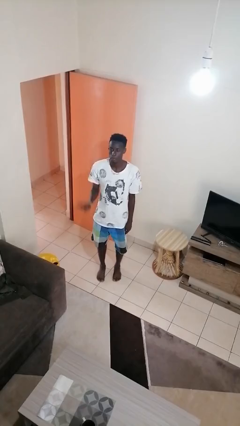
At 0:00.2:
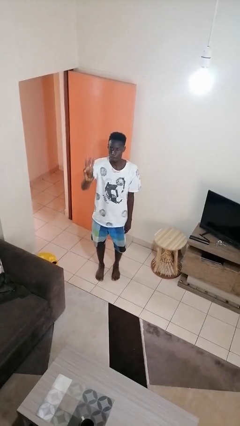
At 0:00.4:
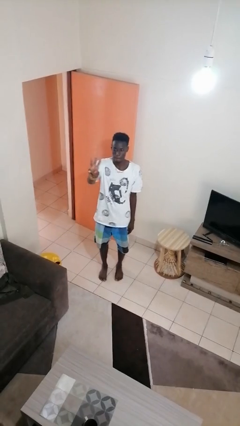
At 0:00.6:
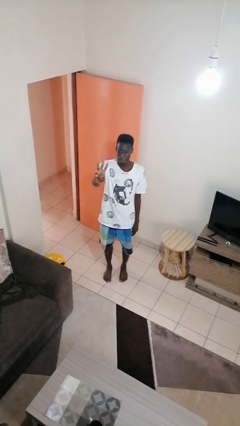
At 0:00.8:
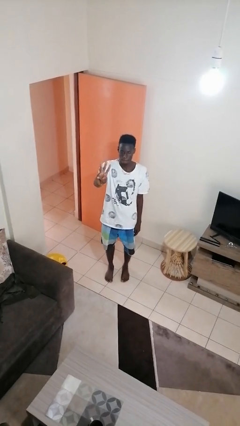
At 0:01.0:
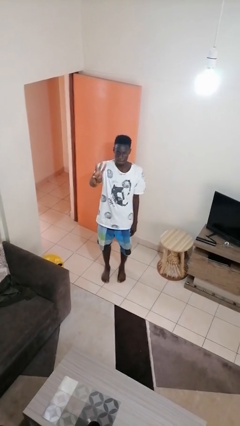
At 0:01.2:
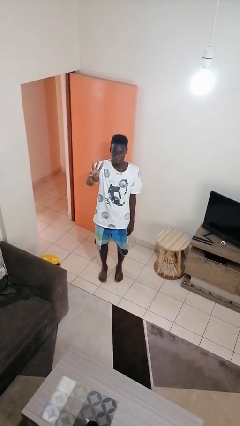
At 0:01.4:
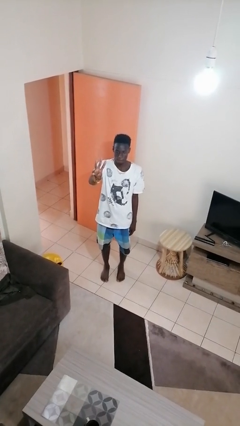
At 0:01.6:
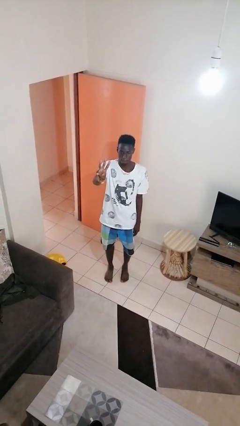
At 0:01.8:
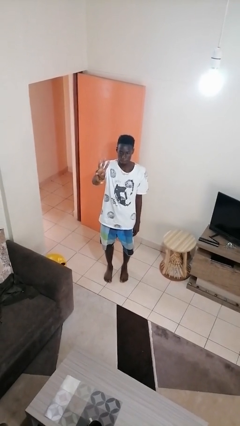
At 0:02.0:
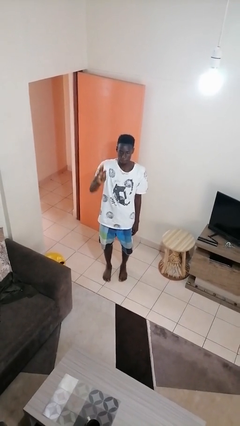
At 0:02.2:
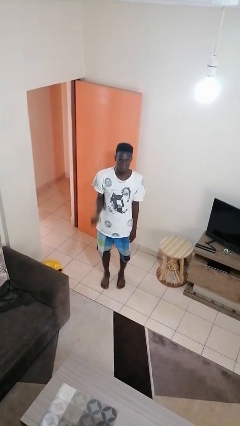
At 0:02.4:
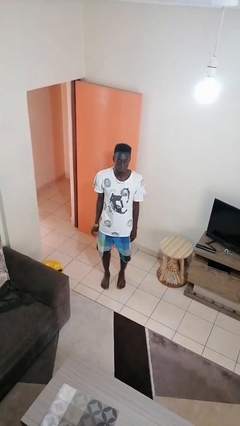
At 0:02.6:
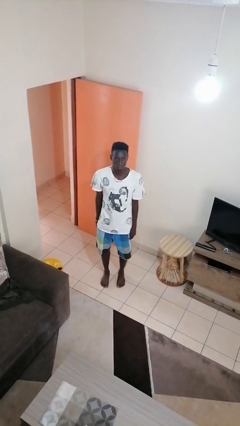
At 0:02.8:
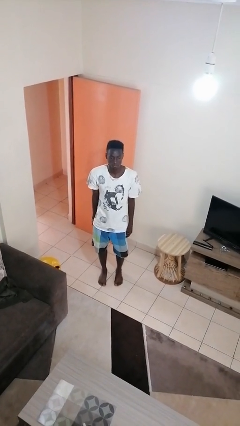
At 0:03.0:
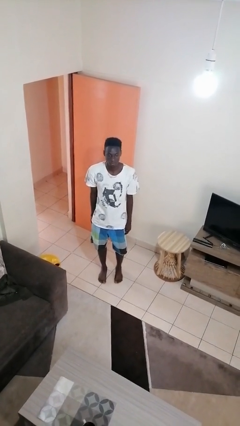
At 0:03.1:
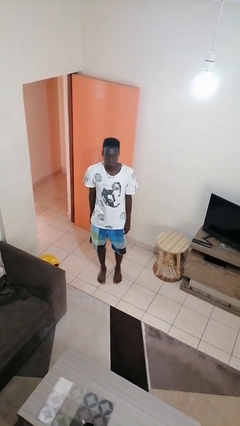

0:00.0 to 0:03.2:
person gestures number three

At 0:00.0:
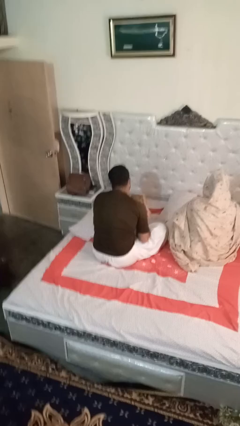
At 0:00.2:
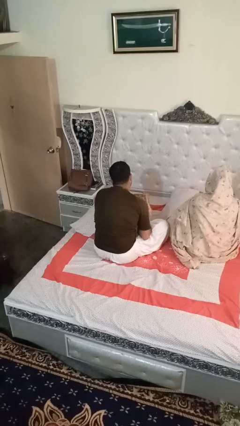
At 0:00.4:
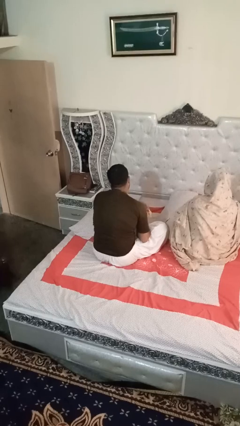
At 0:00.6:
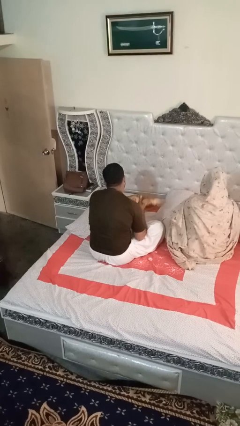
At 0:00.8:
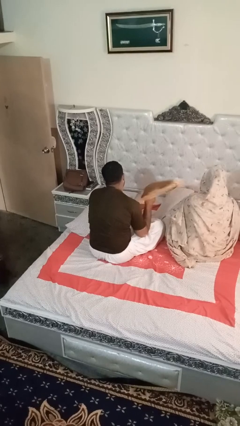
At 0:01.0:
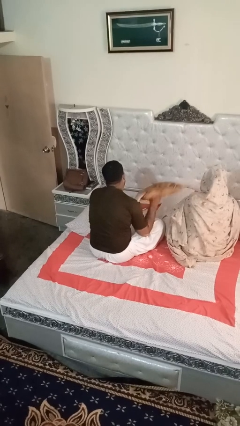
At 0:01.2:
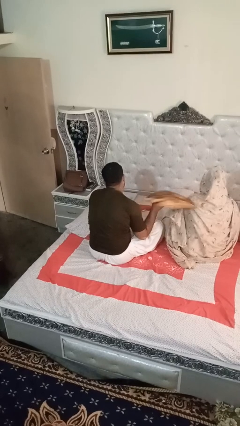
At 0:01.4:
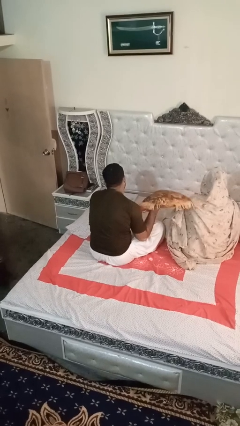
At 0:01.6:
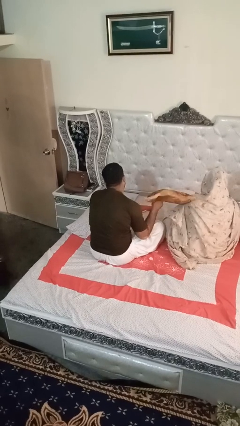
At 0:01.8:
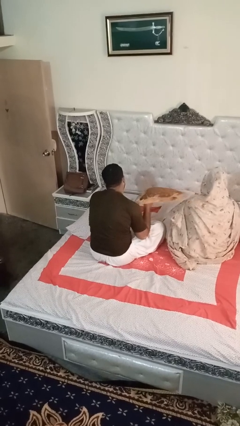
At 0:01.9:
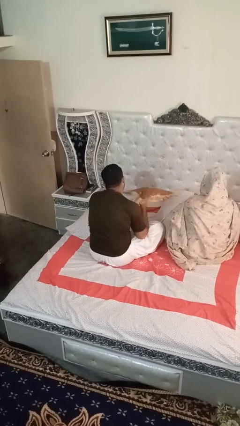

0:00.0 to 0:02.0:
person hits person with pillow

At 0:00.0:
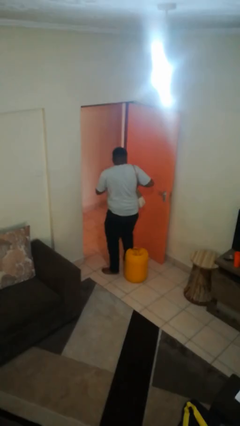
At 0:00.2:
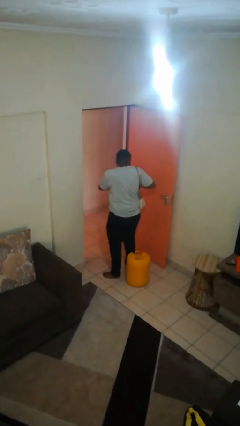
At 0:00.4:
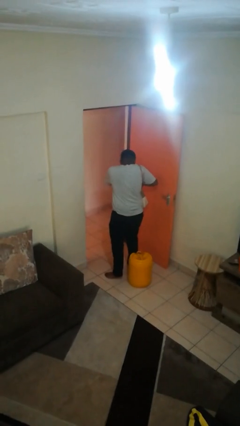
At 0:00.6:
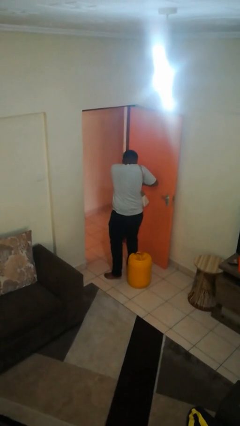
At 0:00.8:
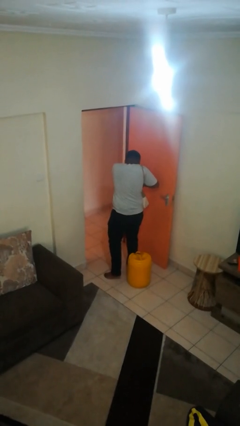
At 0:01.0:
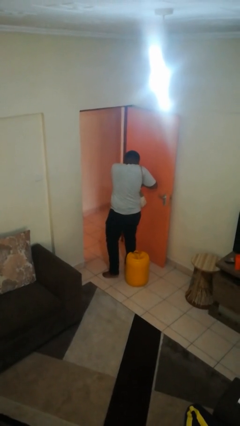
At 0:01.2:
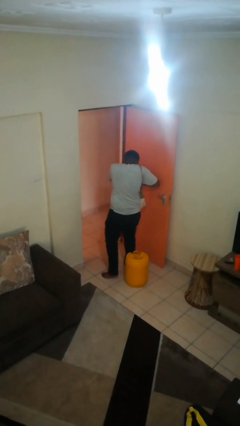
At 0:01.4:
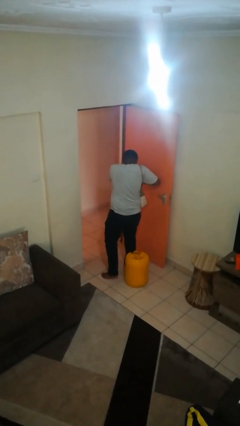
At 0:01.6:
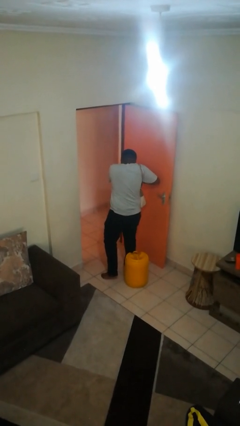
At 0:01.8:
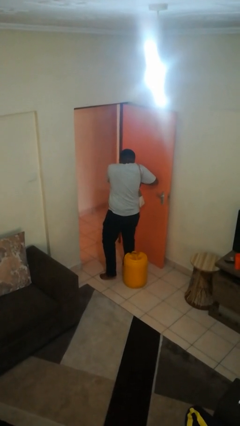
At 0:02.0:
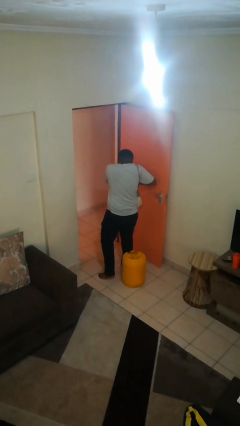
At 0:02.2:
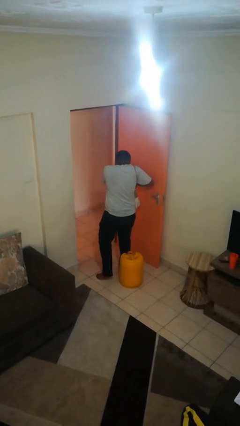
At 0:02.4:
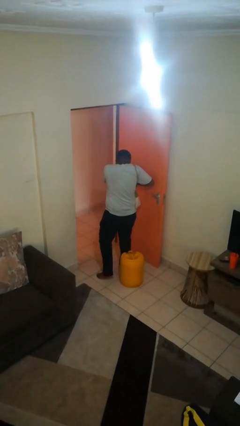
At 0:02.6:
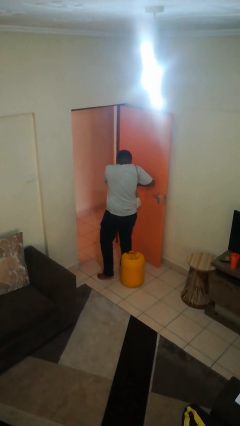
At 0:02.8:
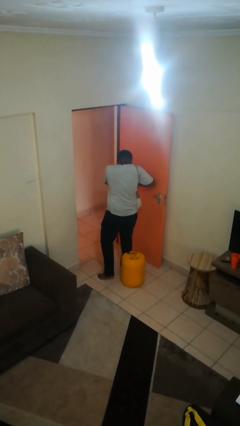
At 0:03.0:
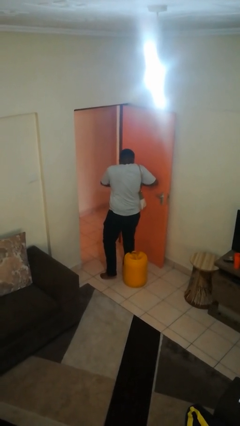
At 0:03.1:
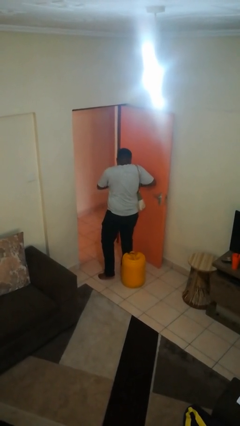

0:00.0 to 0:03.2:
person searches in purse

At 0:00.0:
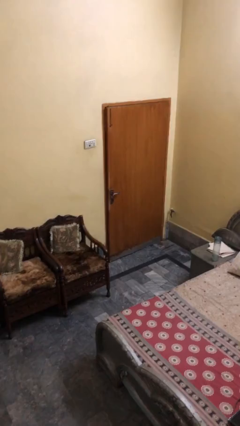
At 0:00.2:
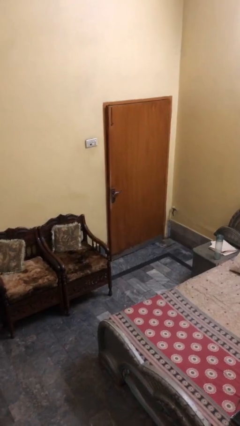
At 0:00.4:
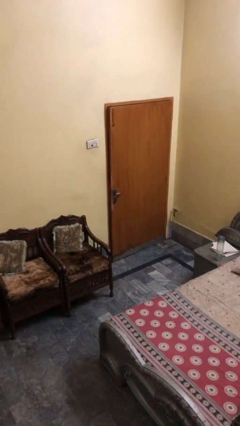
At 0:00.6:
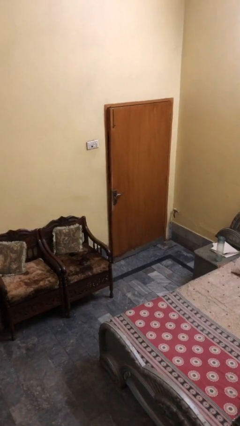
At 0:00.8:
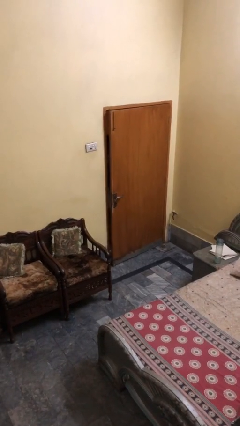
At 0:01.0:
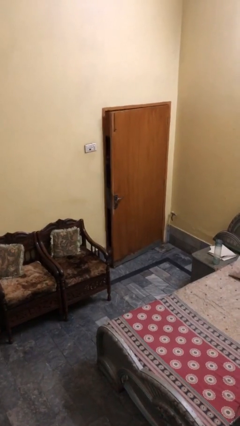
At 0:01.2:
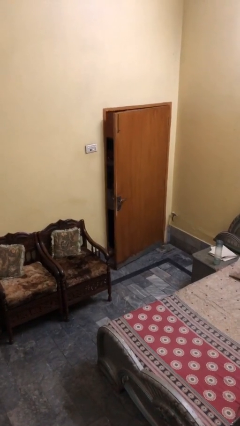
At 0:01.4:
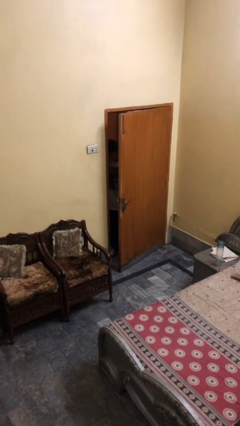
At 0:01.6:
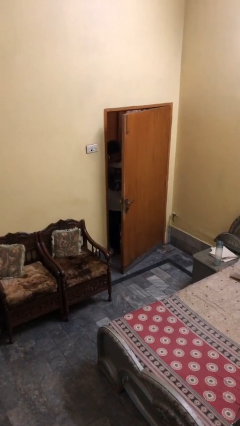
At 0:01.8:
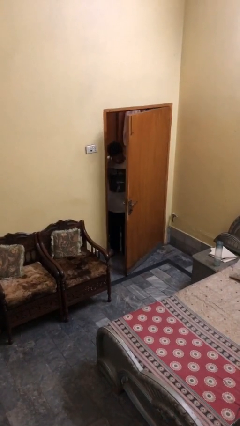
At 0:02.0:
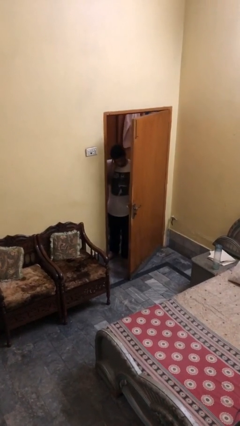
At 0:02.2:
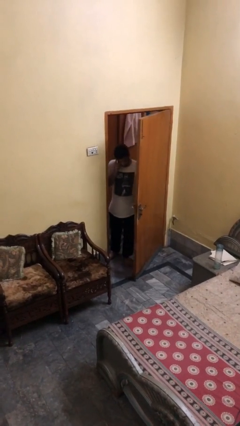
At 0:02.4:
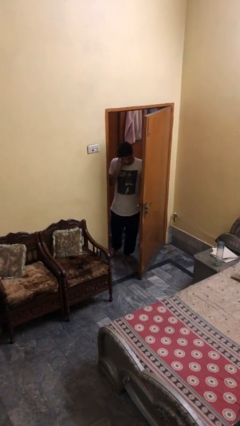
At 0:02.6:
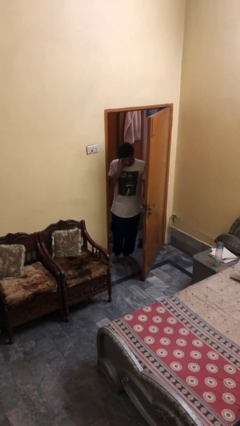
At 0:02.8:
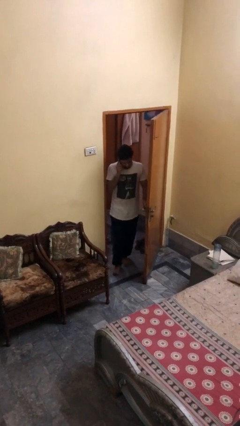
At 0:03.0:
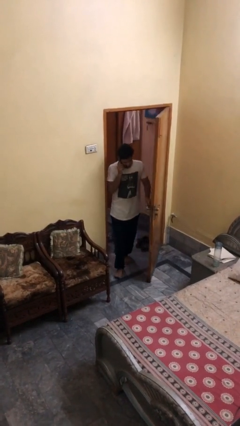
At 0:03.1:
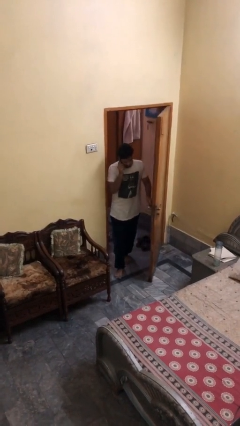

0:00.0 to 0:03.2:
person opens facility door

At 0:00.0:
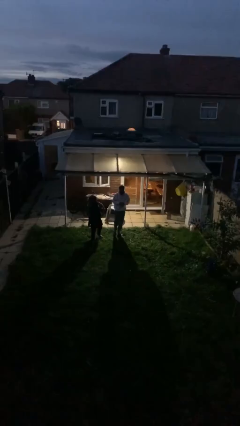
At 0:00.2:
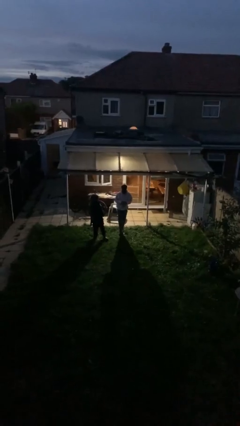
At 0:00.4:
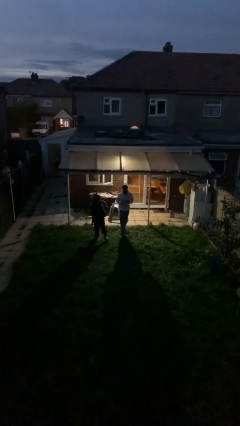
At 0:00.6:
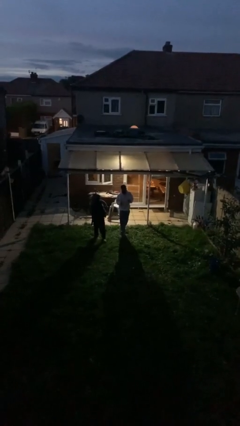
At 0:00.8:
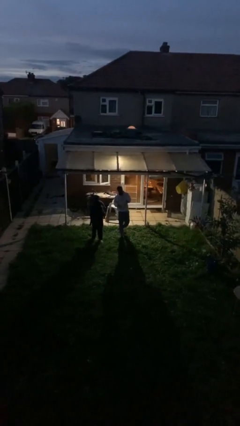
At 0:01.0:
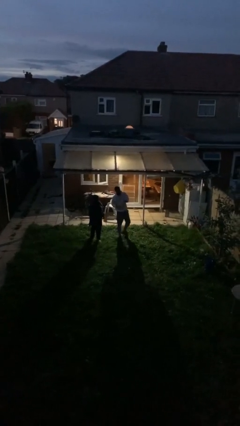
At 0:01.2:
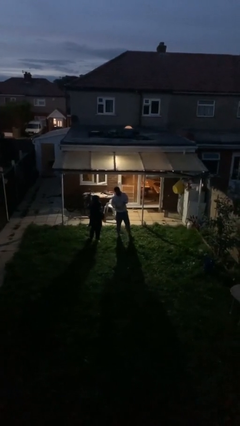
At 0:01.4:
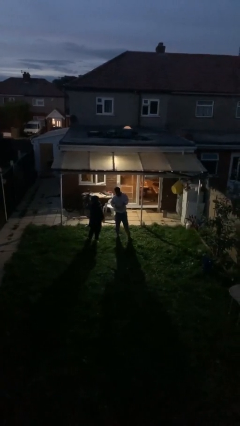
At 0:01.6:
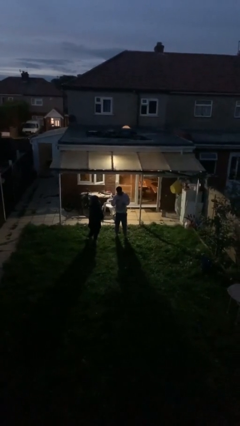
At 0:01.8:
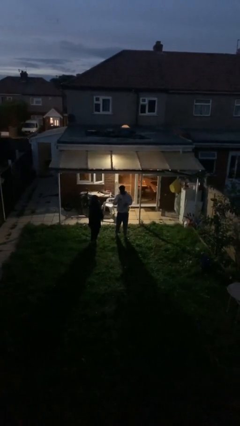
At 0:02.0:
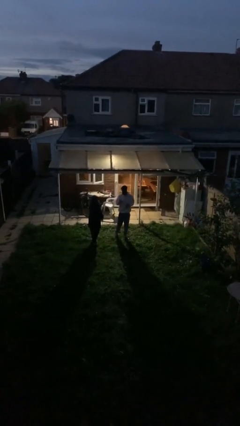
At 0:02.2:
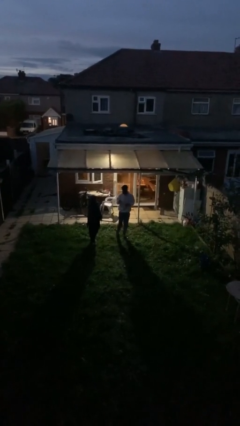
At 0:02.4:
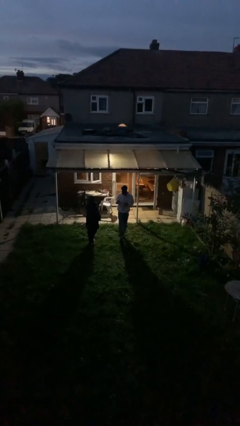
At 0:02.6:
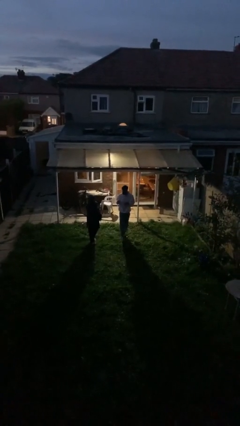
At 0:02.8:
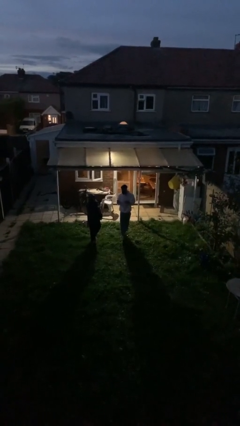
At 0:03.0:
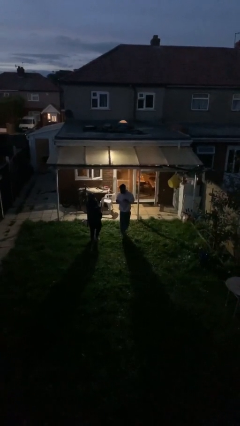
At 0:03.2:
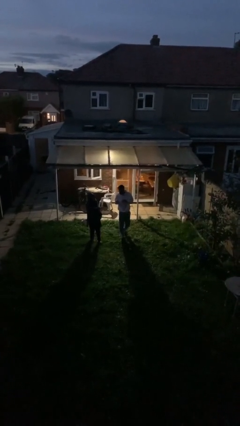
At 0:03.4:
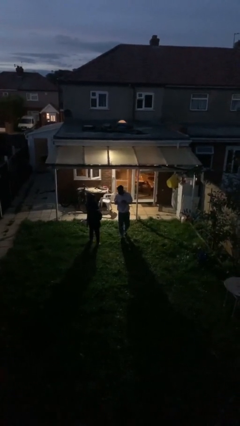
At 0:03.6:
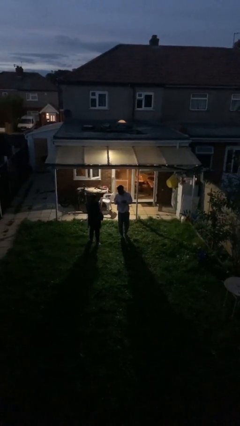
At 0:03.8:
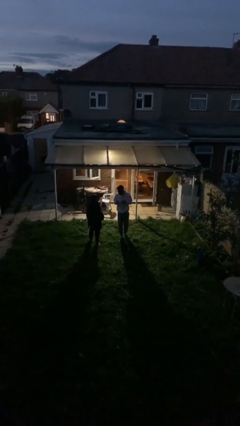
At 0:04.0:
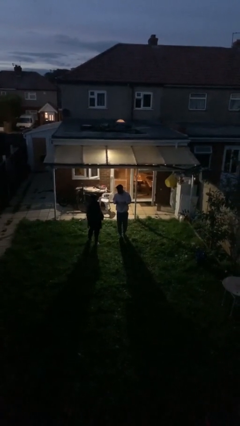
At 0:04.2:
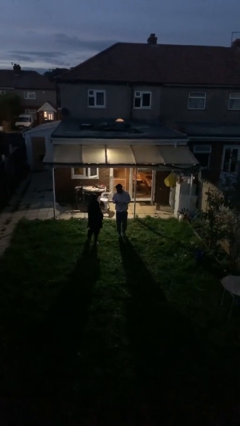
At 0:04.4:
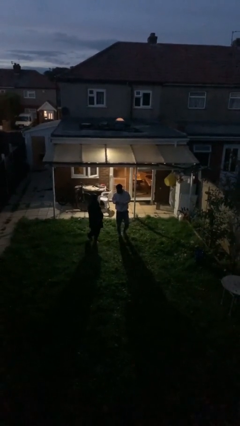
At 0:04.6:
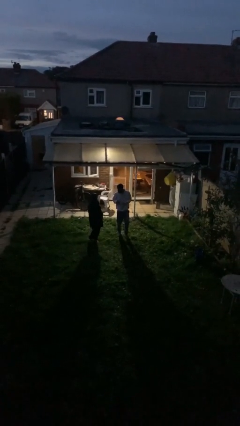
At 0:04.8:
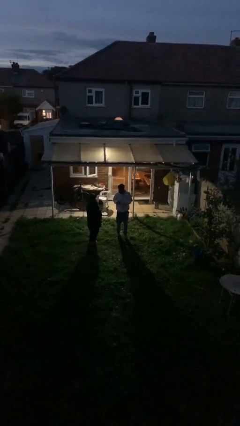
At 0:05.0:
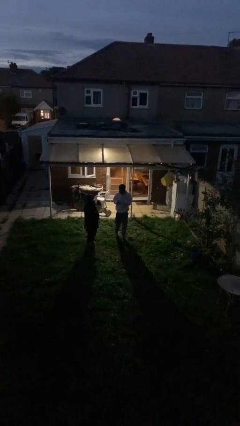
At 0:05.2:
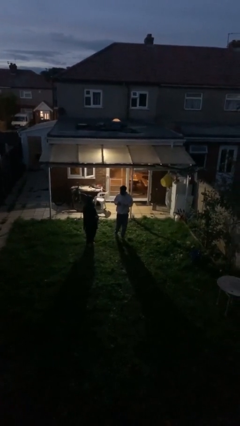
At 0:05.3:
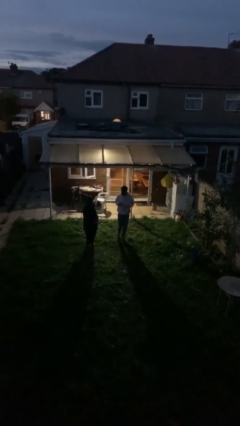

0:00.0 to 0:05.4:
person talks to person

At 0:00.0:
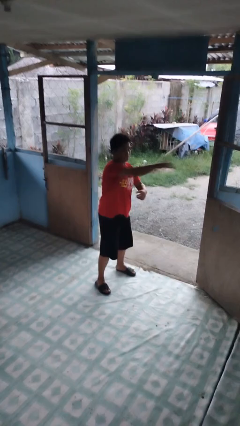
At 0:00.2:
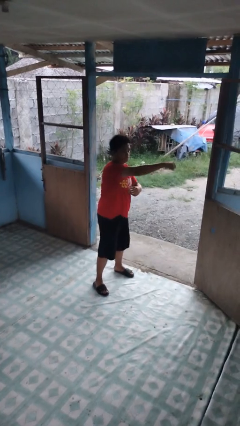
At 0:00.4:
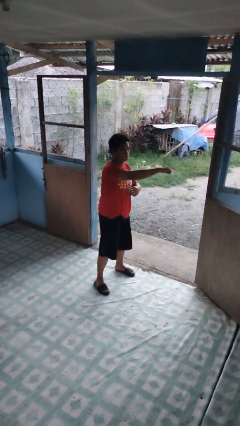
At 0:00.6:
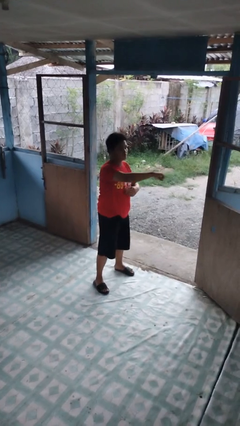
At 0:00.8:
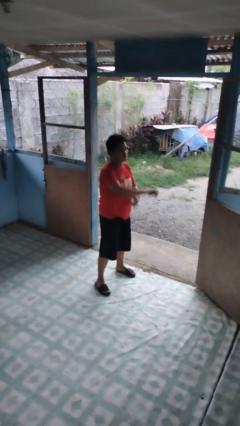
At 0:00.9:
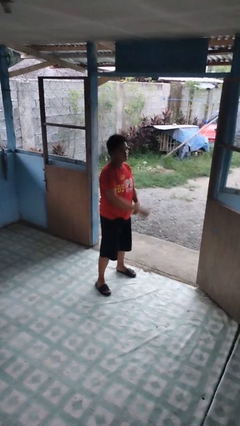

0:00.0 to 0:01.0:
person punches
